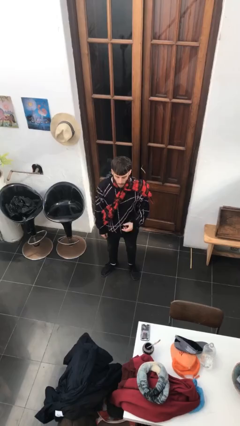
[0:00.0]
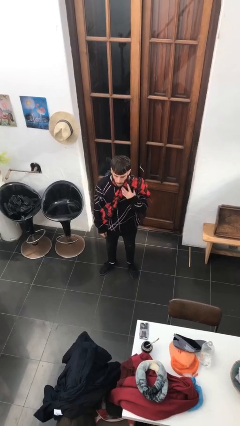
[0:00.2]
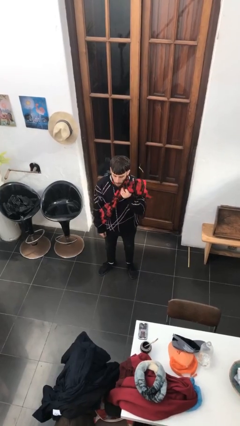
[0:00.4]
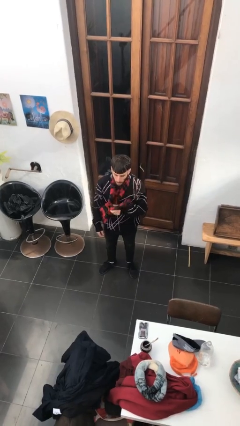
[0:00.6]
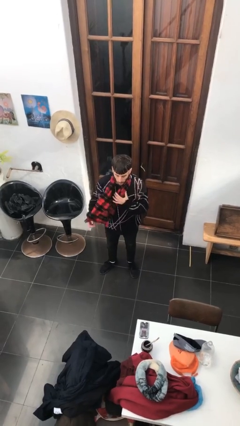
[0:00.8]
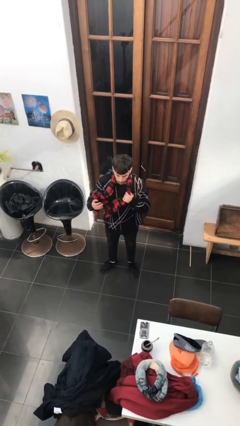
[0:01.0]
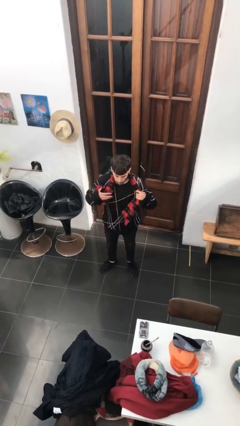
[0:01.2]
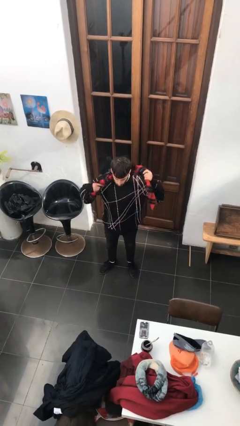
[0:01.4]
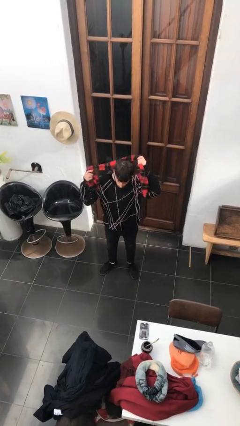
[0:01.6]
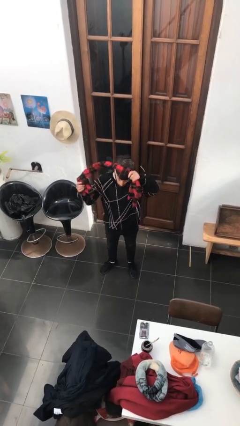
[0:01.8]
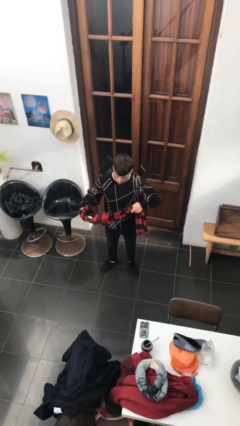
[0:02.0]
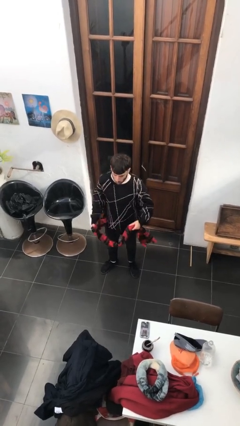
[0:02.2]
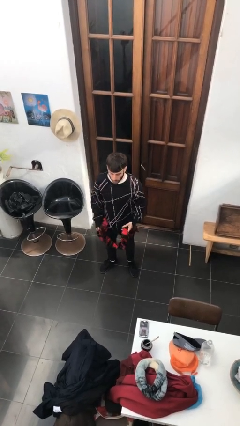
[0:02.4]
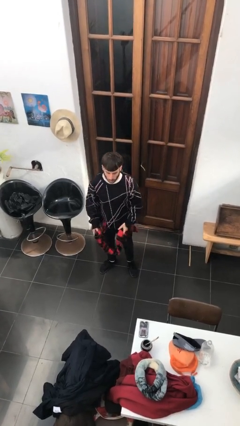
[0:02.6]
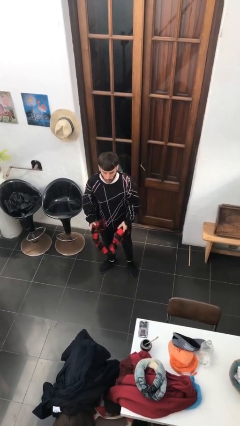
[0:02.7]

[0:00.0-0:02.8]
person takes off scarf

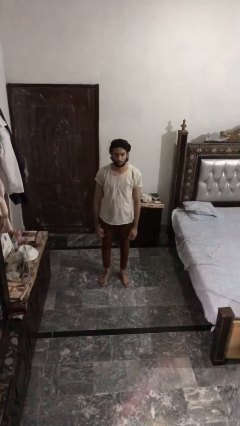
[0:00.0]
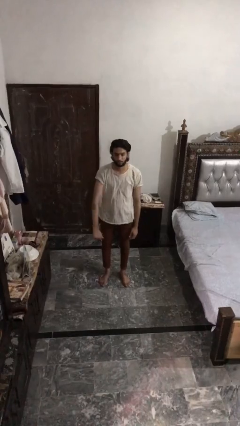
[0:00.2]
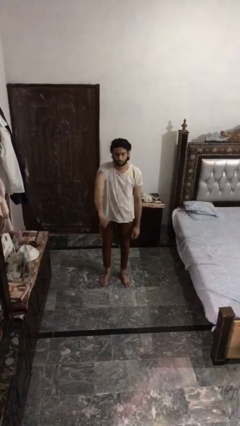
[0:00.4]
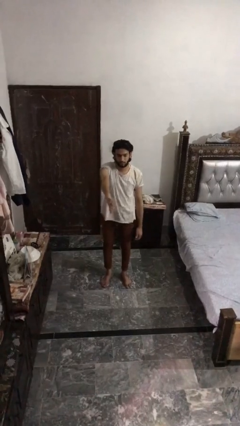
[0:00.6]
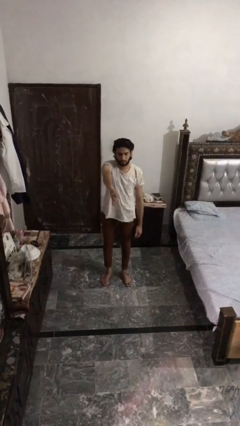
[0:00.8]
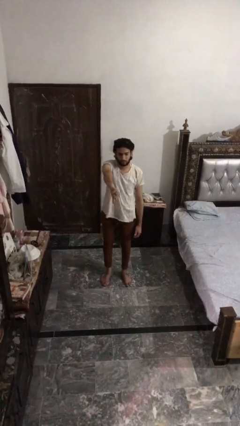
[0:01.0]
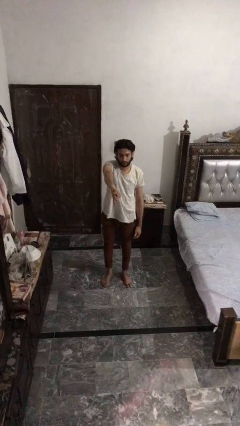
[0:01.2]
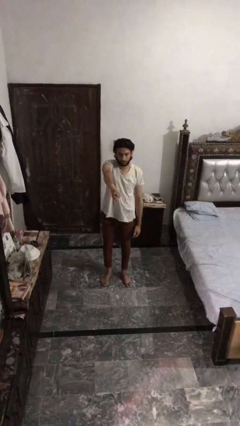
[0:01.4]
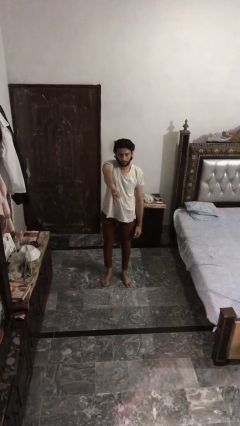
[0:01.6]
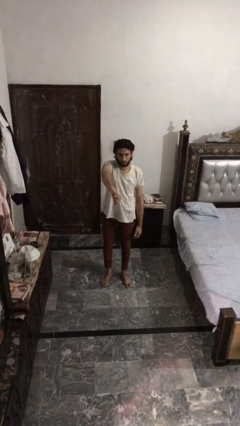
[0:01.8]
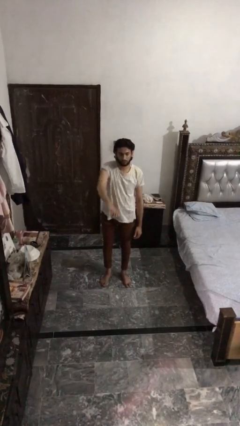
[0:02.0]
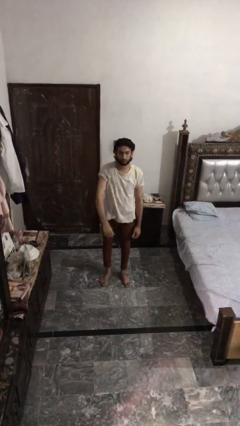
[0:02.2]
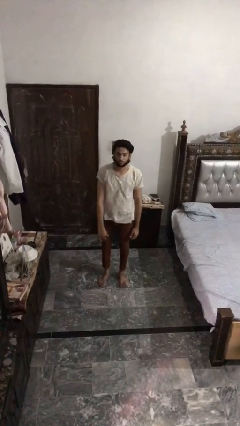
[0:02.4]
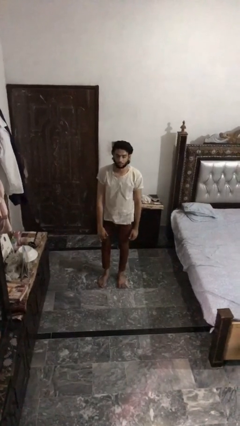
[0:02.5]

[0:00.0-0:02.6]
person gestures thumbs down

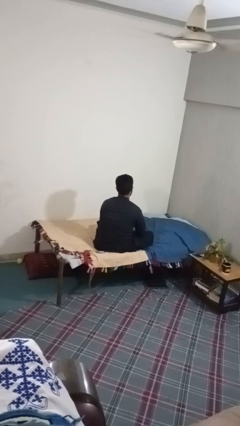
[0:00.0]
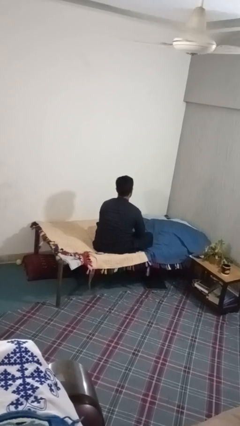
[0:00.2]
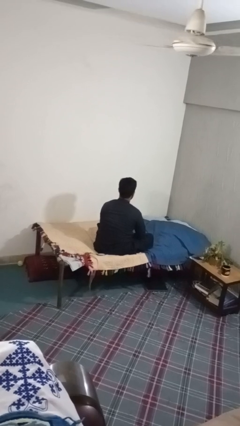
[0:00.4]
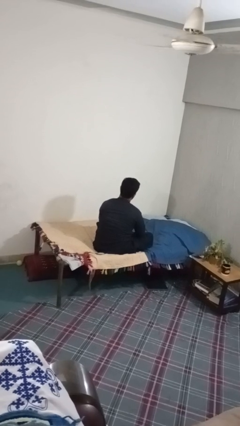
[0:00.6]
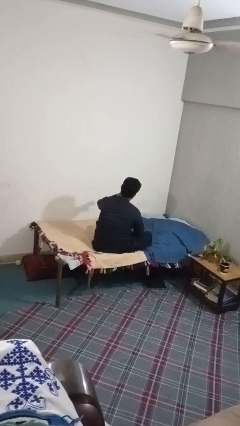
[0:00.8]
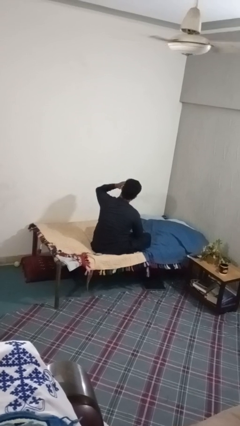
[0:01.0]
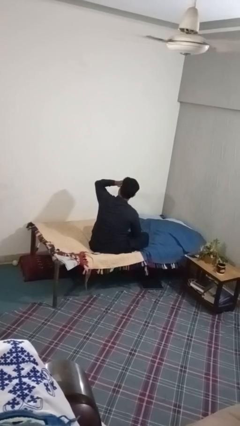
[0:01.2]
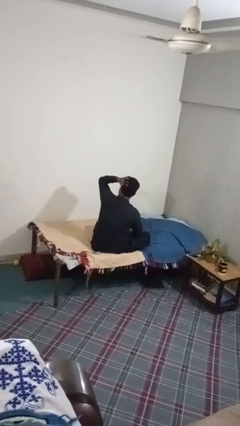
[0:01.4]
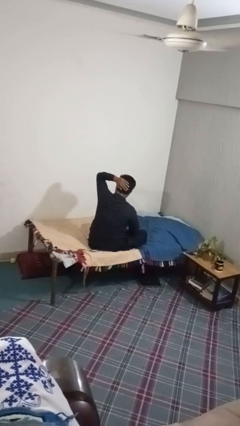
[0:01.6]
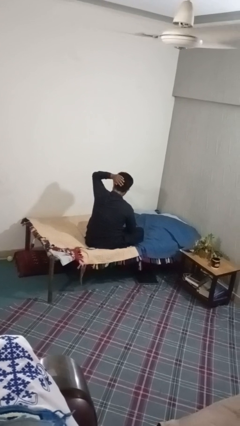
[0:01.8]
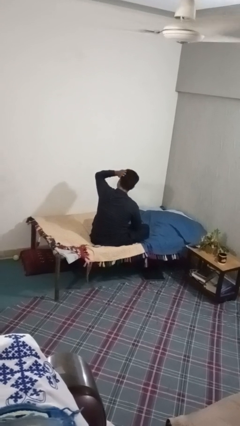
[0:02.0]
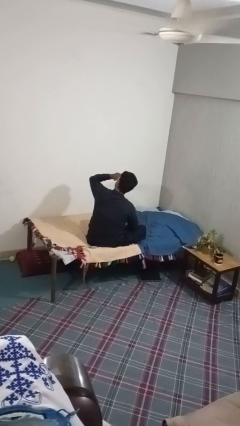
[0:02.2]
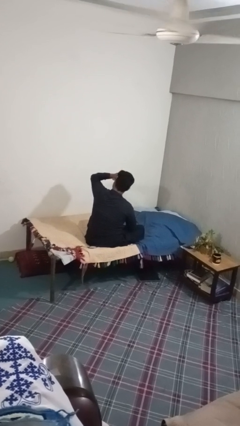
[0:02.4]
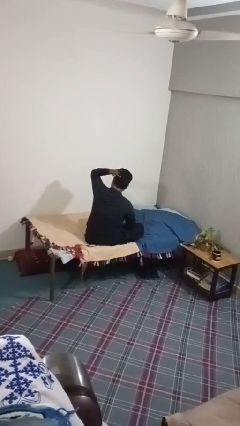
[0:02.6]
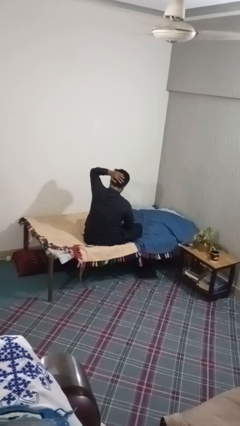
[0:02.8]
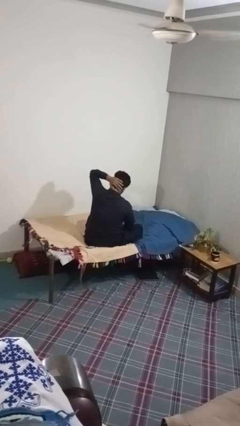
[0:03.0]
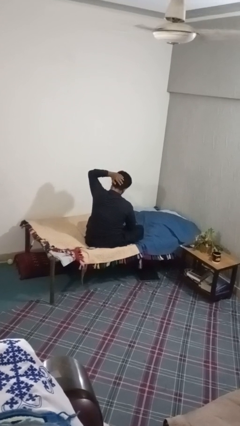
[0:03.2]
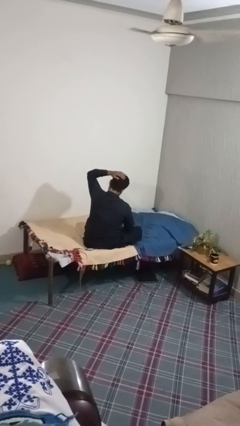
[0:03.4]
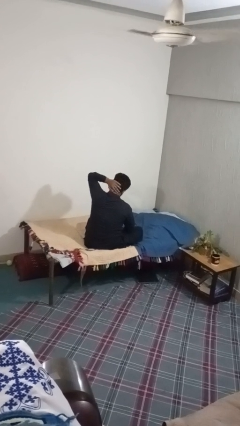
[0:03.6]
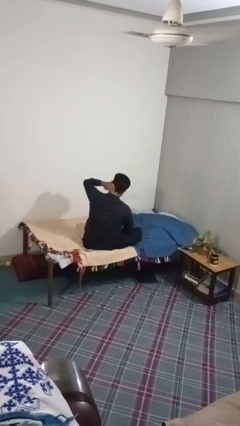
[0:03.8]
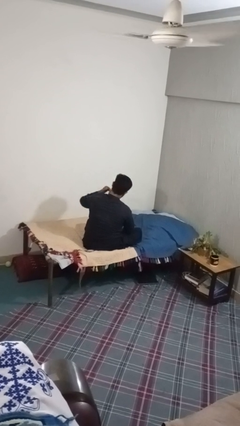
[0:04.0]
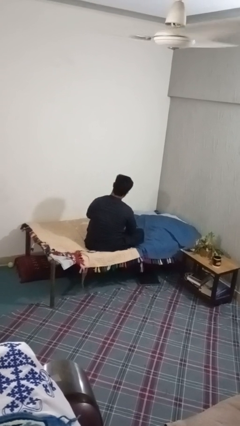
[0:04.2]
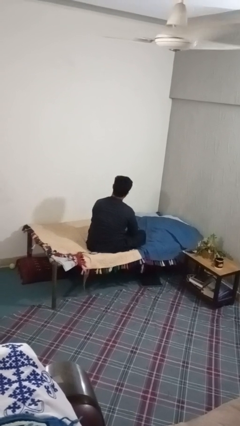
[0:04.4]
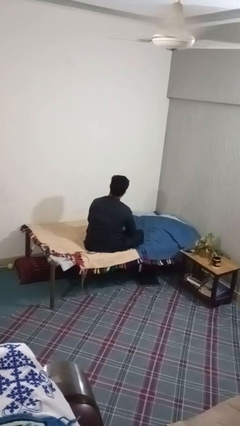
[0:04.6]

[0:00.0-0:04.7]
person strokes hair

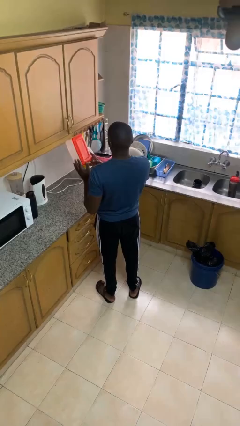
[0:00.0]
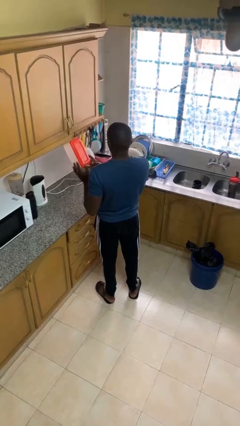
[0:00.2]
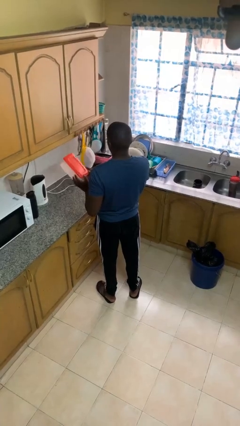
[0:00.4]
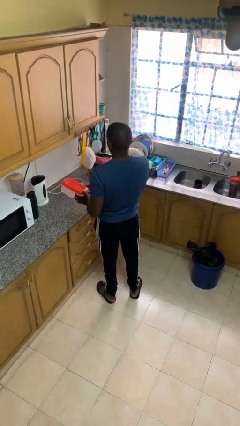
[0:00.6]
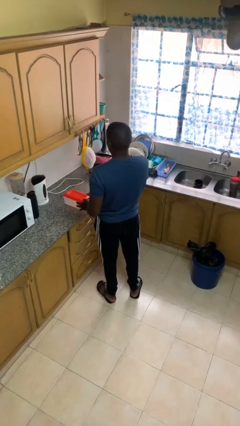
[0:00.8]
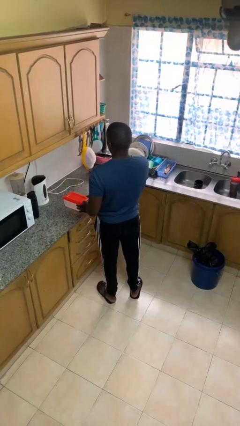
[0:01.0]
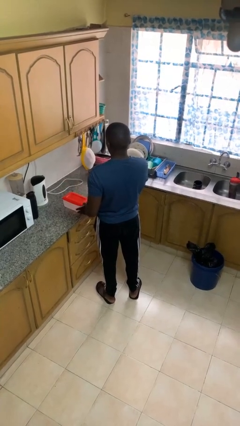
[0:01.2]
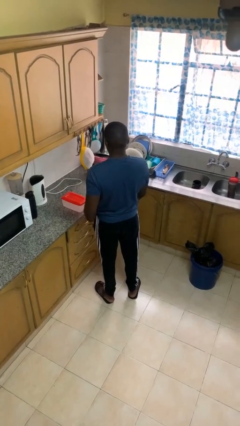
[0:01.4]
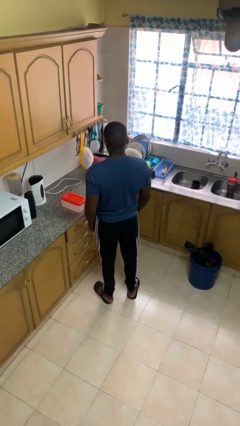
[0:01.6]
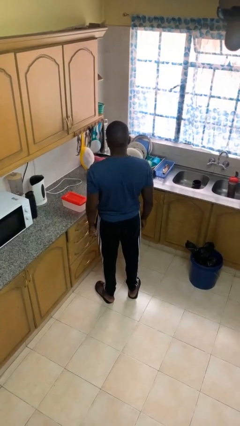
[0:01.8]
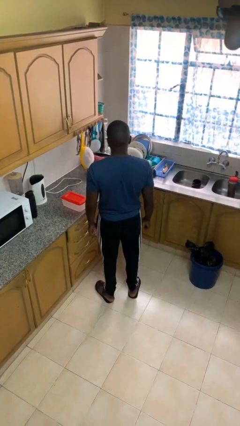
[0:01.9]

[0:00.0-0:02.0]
person puts down object on countertop

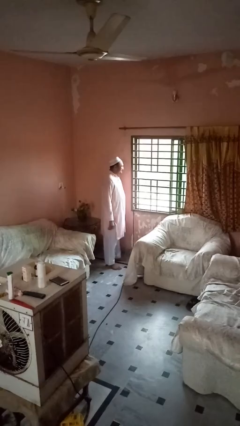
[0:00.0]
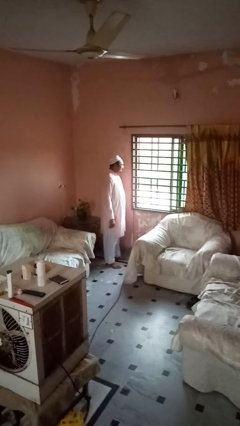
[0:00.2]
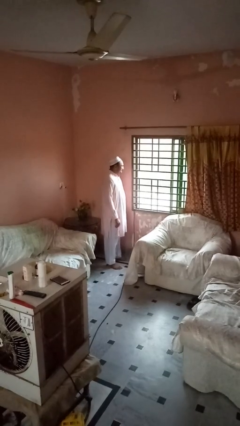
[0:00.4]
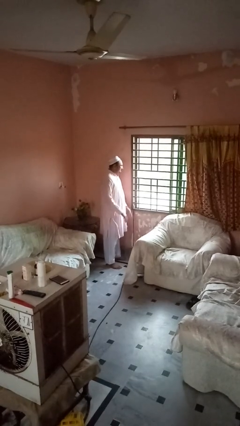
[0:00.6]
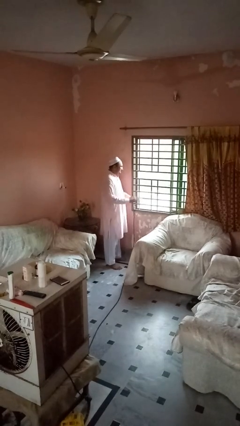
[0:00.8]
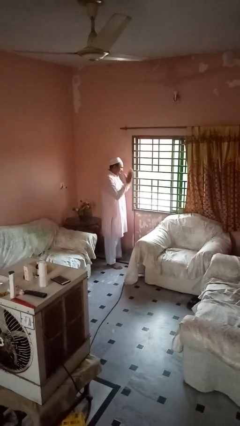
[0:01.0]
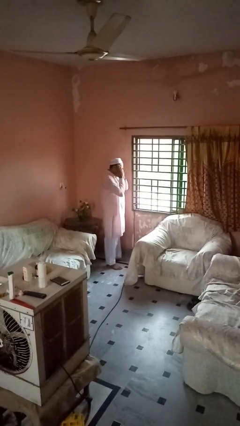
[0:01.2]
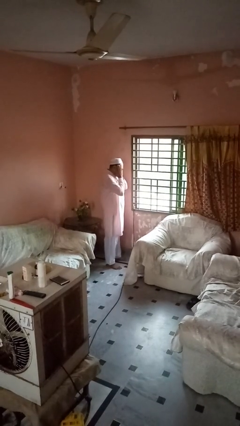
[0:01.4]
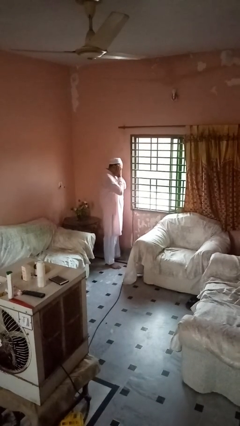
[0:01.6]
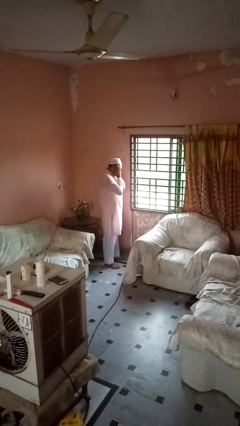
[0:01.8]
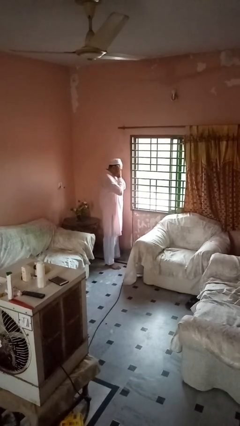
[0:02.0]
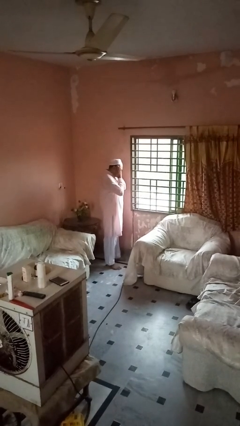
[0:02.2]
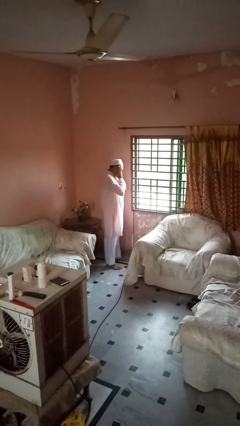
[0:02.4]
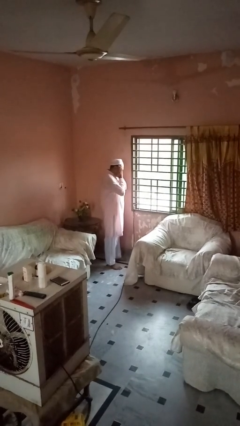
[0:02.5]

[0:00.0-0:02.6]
person covers face with hands

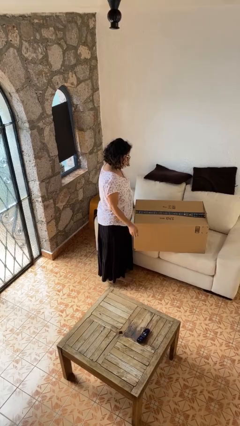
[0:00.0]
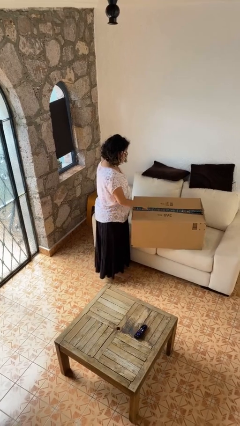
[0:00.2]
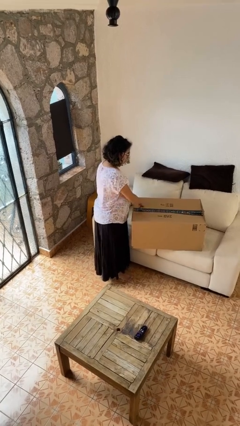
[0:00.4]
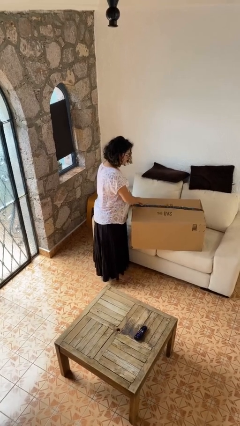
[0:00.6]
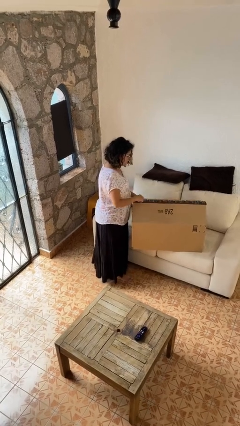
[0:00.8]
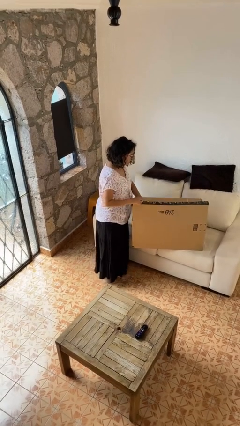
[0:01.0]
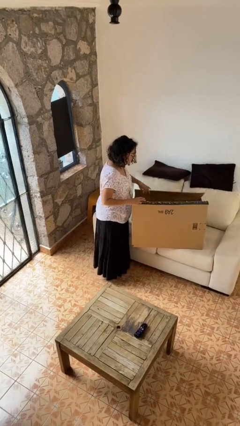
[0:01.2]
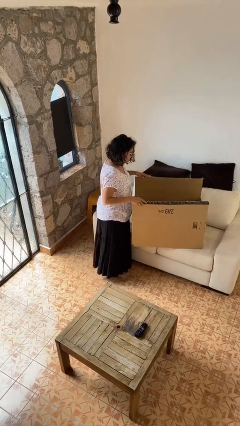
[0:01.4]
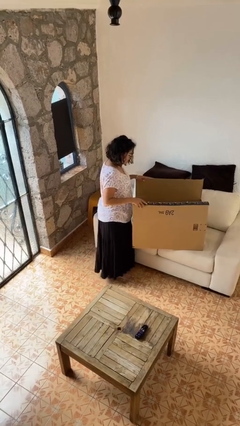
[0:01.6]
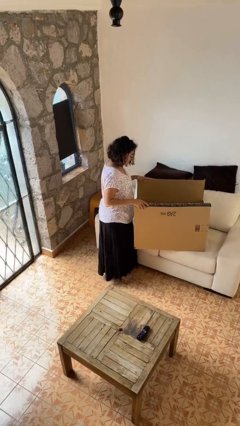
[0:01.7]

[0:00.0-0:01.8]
person opens box

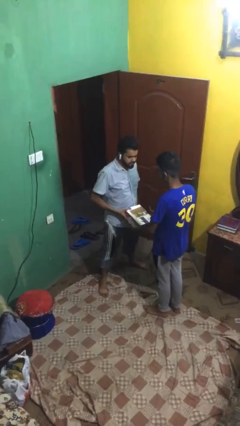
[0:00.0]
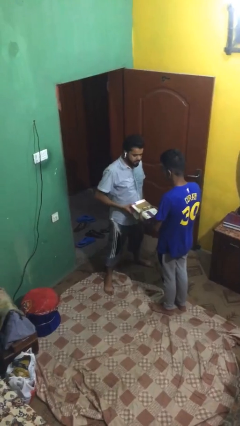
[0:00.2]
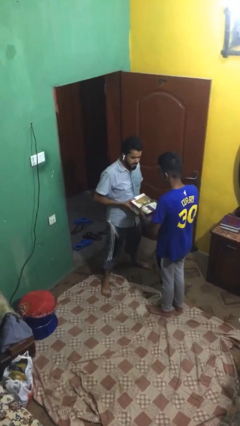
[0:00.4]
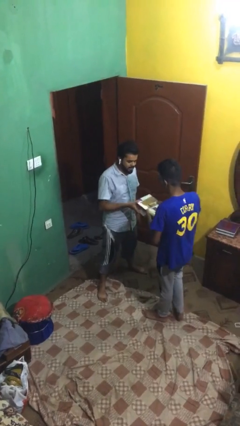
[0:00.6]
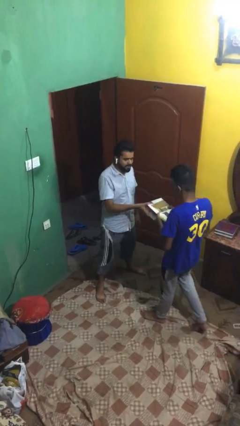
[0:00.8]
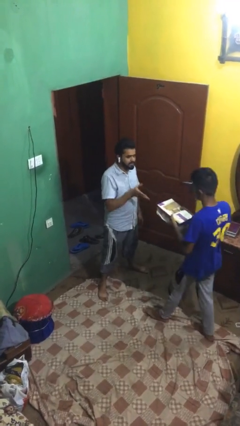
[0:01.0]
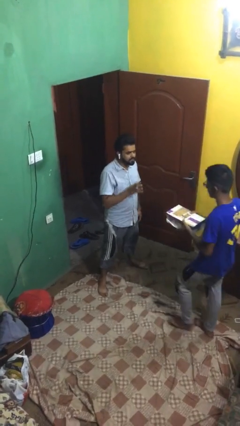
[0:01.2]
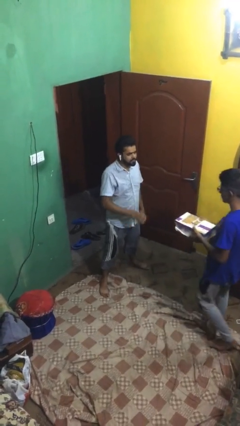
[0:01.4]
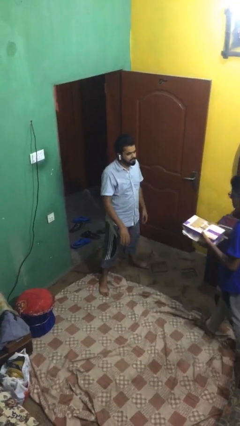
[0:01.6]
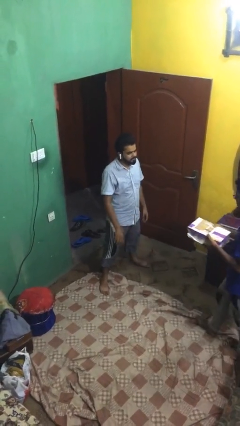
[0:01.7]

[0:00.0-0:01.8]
person transfers object to person
